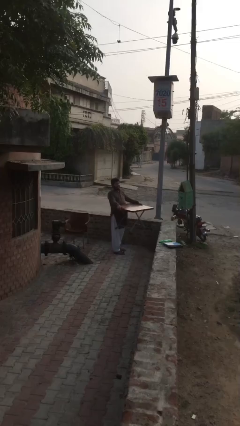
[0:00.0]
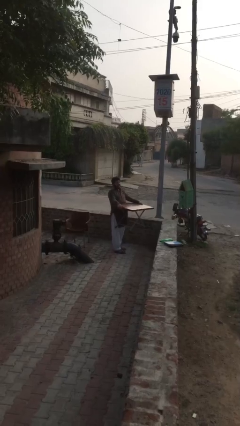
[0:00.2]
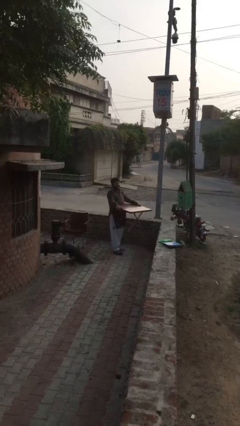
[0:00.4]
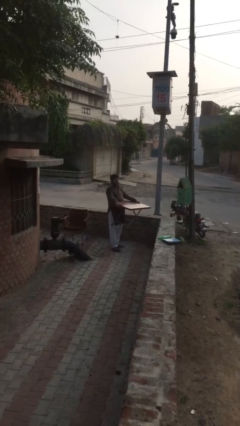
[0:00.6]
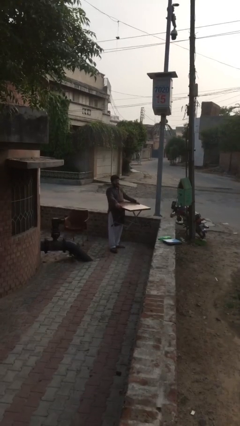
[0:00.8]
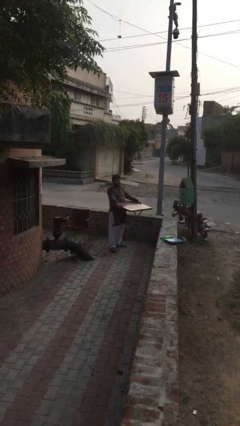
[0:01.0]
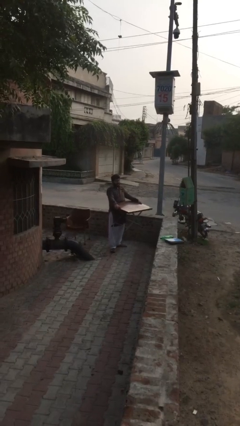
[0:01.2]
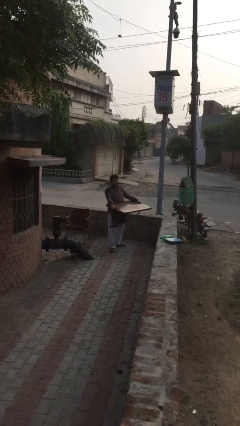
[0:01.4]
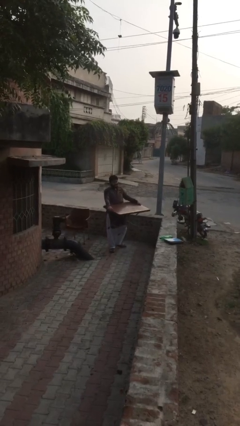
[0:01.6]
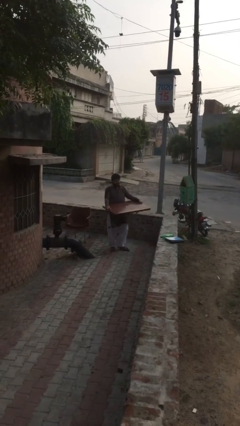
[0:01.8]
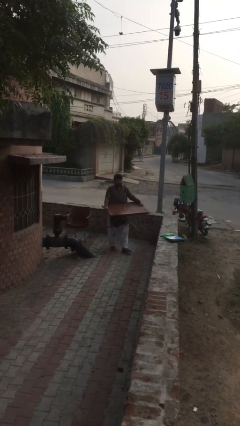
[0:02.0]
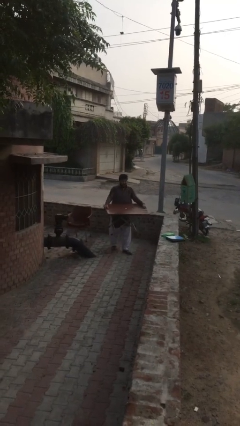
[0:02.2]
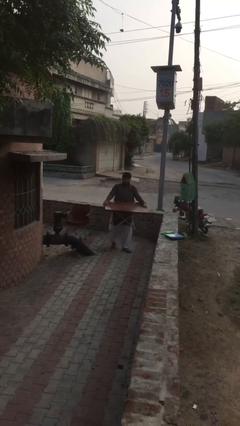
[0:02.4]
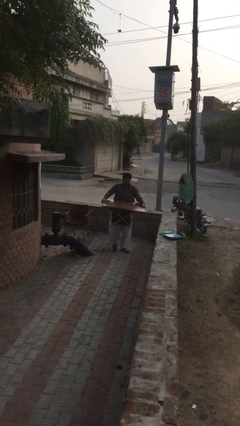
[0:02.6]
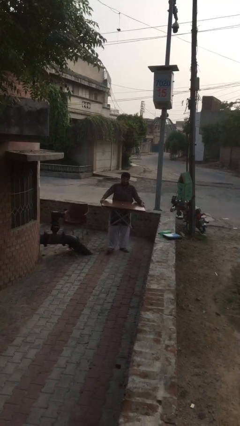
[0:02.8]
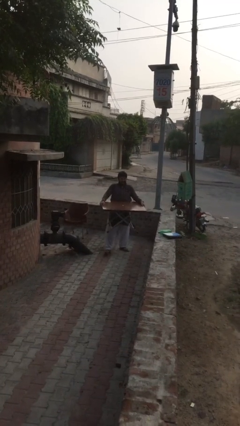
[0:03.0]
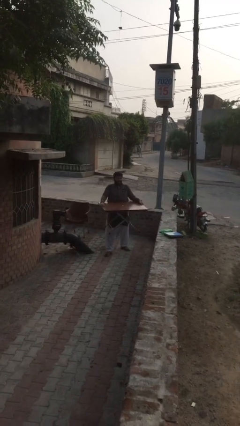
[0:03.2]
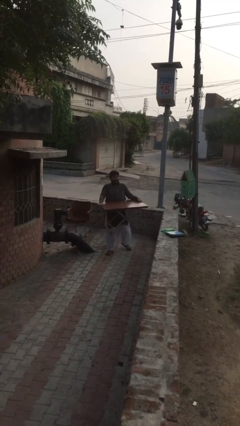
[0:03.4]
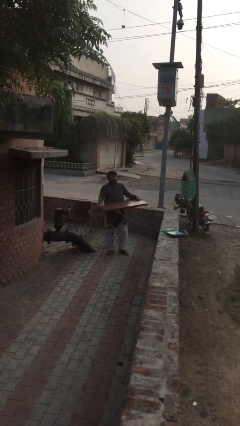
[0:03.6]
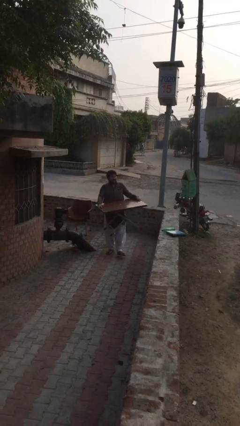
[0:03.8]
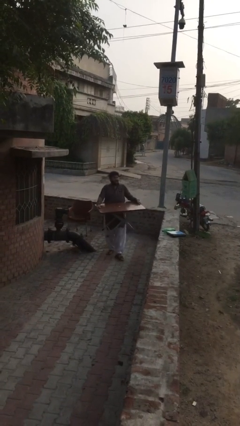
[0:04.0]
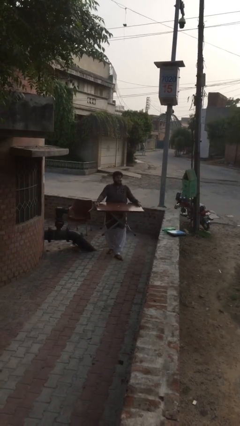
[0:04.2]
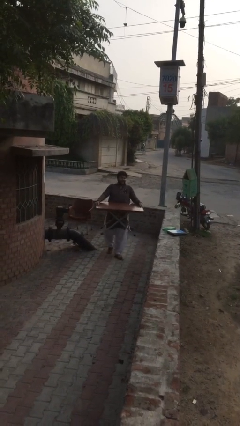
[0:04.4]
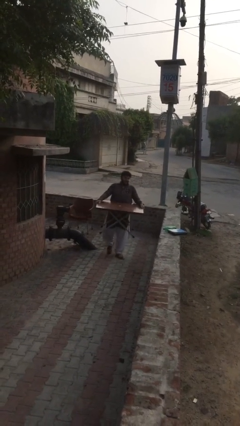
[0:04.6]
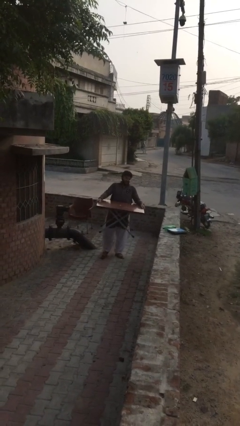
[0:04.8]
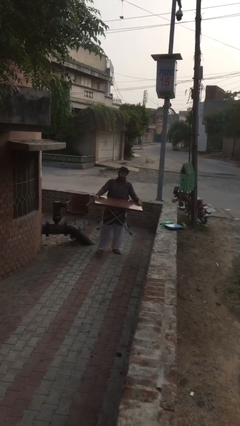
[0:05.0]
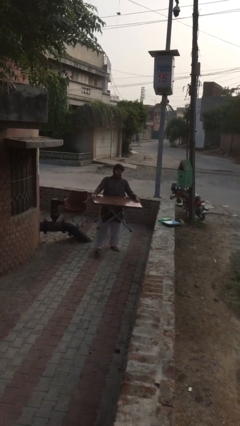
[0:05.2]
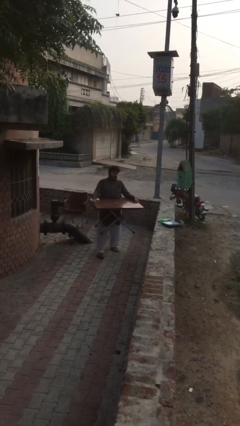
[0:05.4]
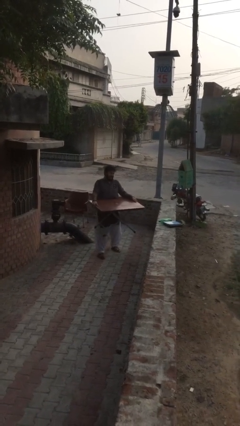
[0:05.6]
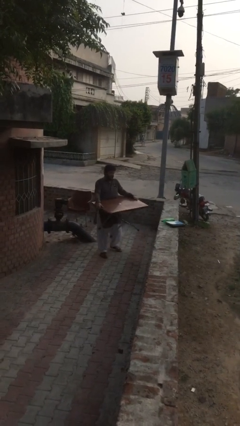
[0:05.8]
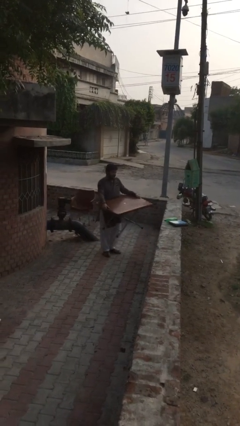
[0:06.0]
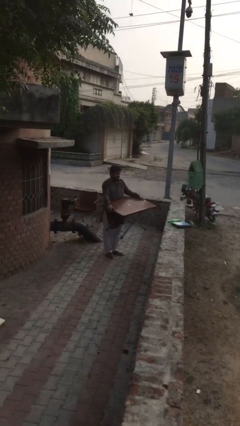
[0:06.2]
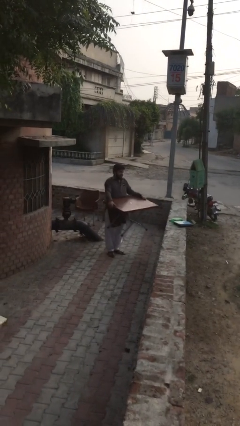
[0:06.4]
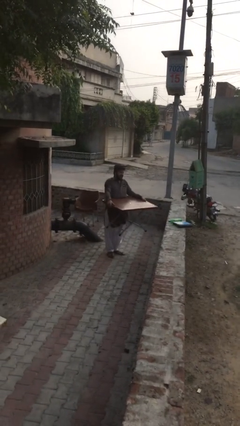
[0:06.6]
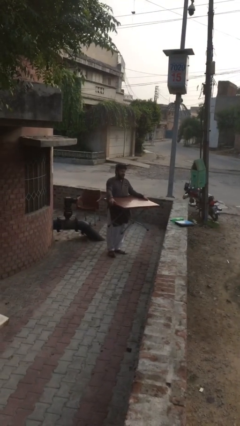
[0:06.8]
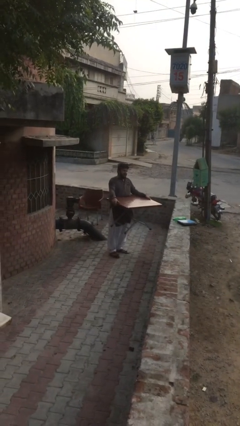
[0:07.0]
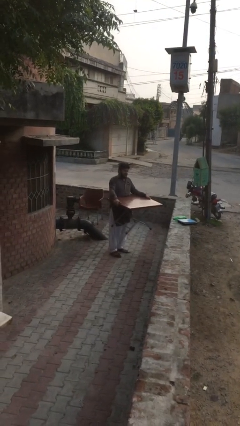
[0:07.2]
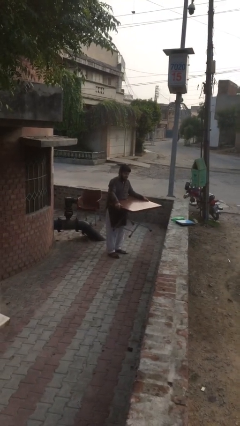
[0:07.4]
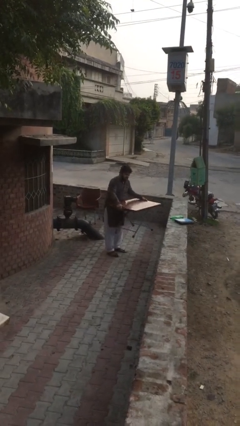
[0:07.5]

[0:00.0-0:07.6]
person carries heavy object

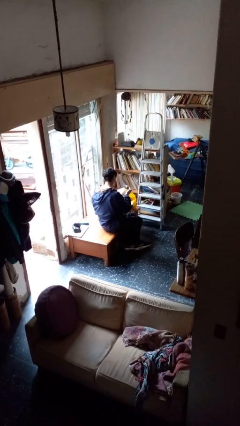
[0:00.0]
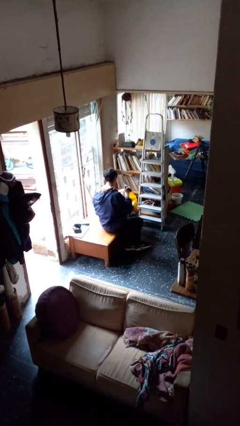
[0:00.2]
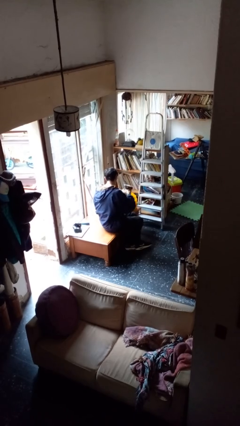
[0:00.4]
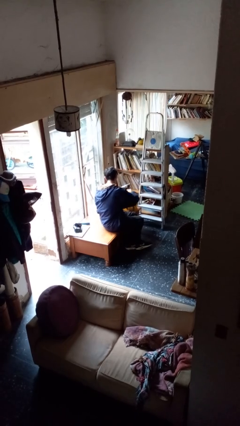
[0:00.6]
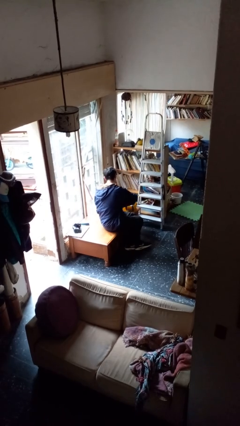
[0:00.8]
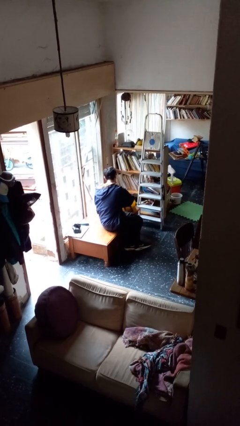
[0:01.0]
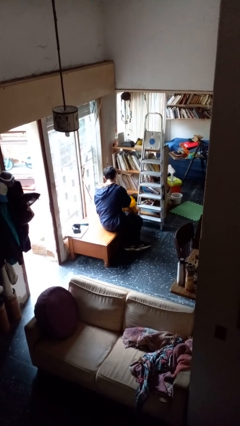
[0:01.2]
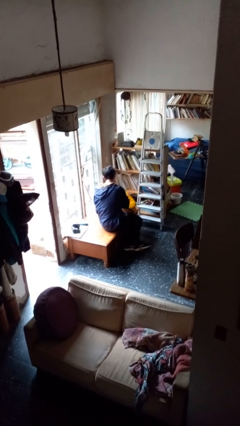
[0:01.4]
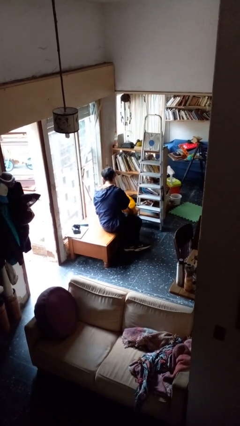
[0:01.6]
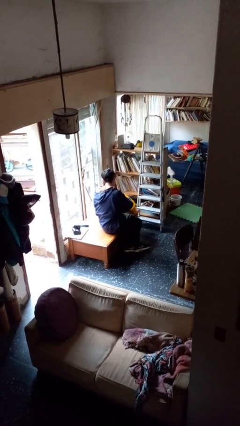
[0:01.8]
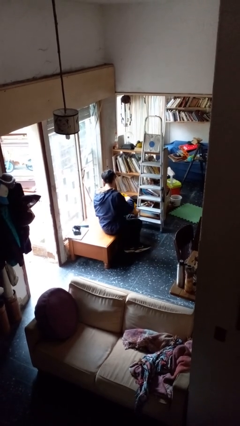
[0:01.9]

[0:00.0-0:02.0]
person puts object into bag

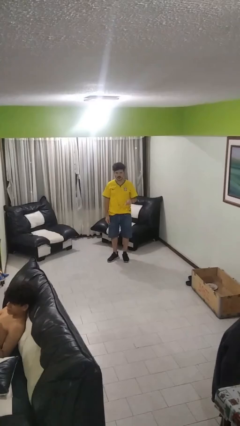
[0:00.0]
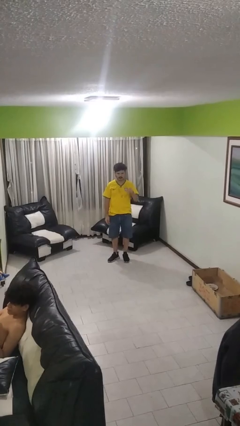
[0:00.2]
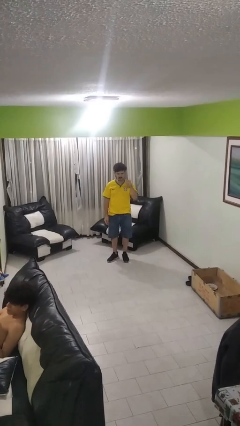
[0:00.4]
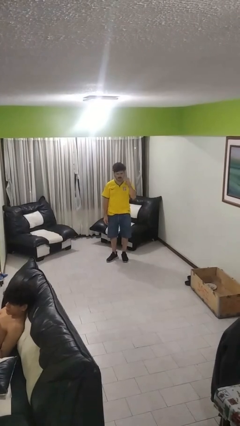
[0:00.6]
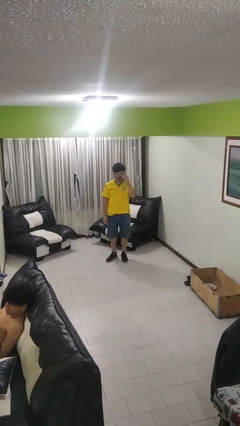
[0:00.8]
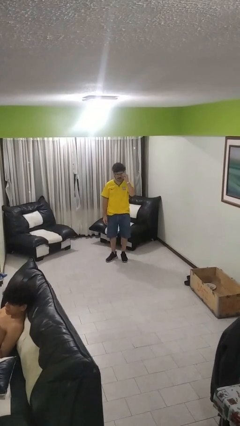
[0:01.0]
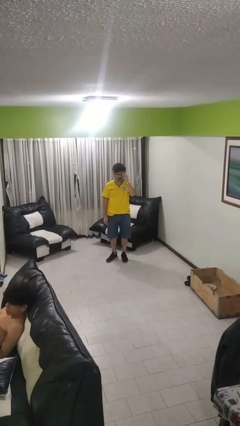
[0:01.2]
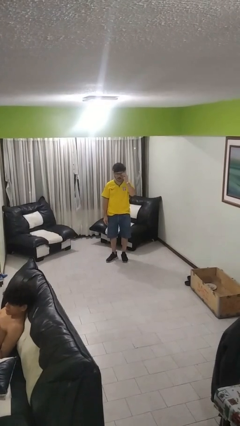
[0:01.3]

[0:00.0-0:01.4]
person puts on glasses

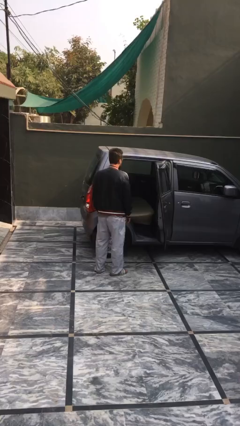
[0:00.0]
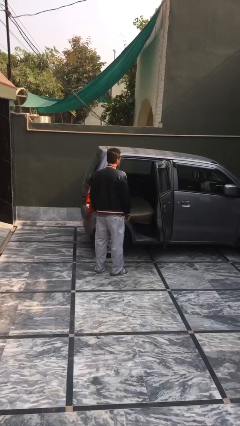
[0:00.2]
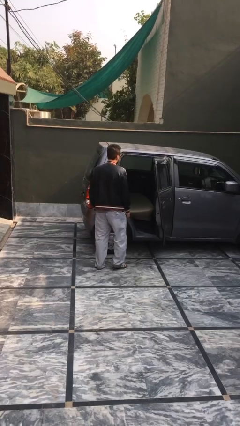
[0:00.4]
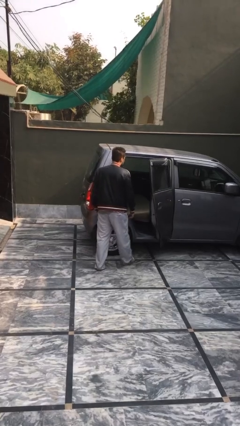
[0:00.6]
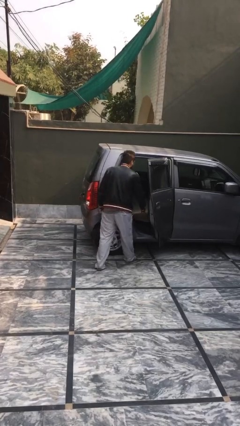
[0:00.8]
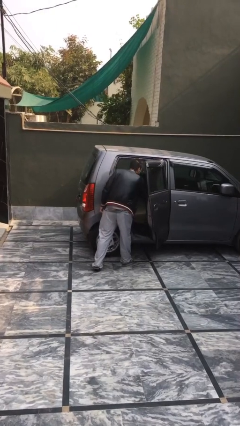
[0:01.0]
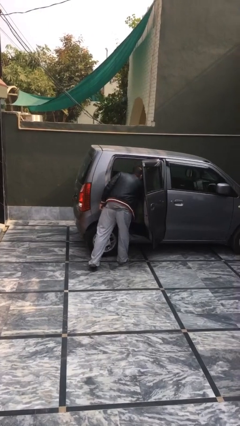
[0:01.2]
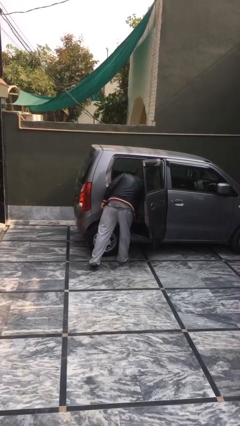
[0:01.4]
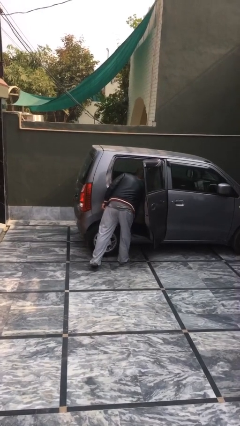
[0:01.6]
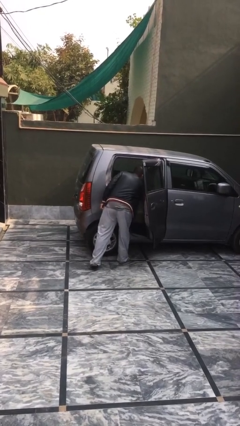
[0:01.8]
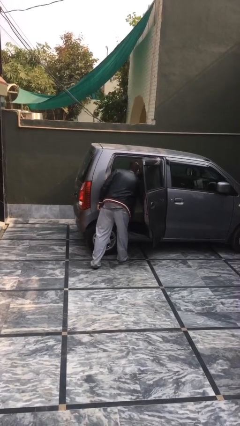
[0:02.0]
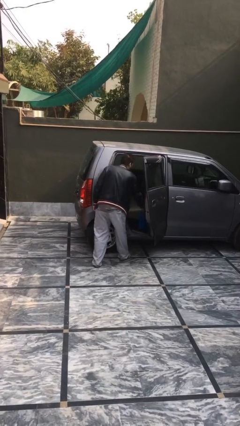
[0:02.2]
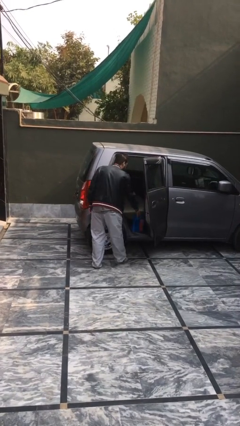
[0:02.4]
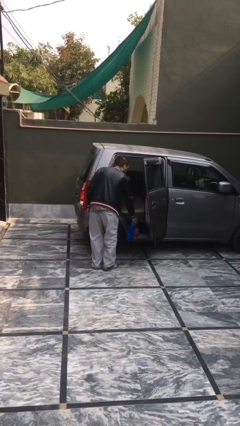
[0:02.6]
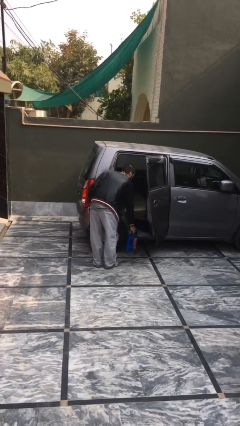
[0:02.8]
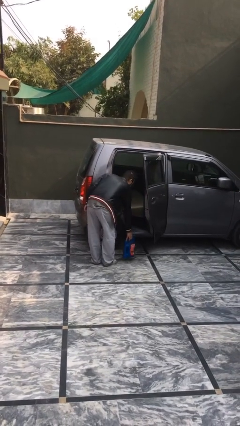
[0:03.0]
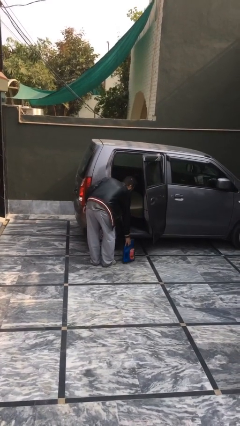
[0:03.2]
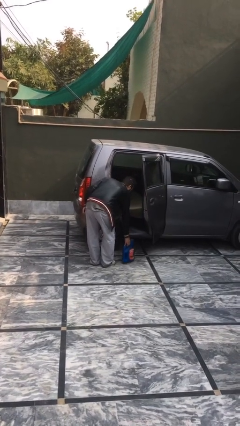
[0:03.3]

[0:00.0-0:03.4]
person unloads car

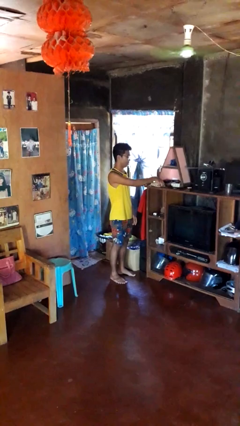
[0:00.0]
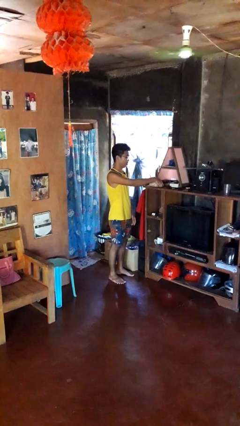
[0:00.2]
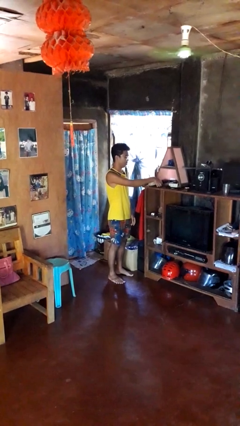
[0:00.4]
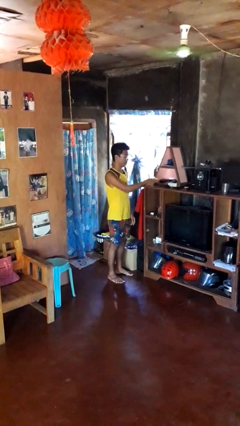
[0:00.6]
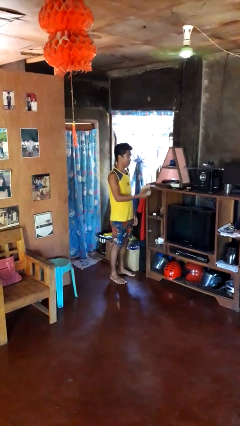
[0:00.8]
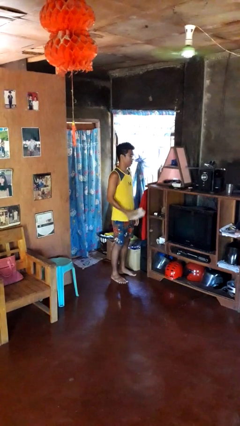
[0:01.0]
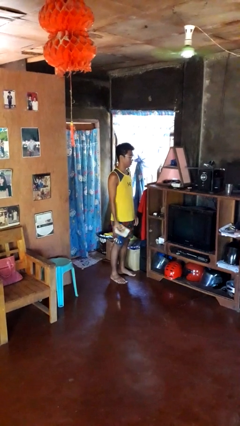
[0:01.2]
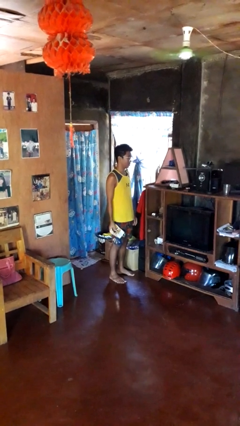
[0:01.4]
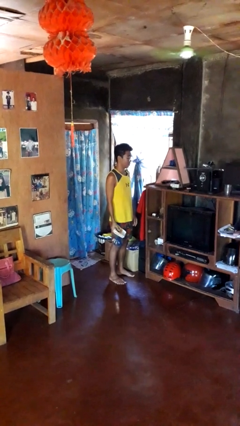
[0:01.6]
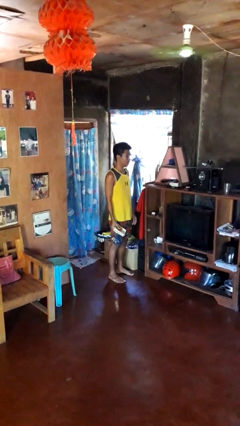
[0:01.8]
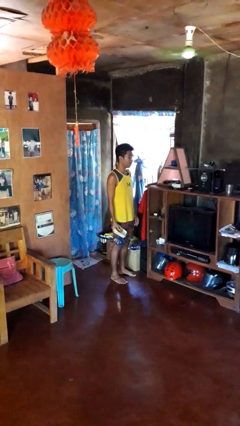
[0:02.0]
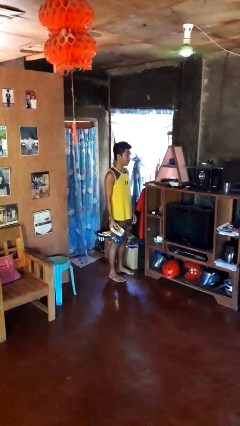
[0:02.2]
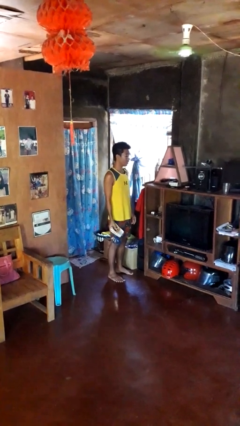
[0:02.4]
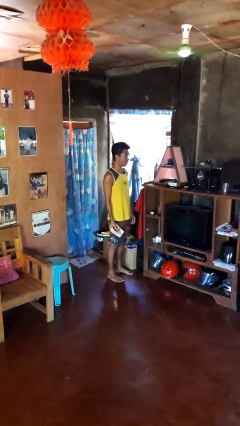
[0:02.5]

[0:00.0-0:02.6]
person picks up object from shelf

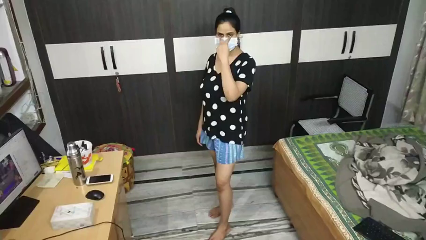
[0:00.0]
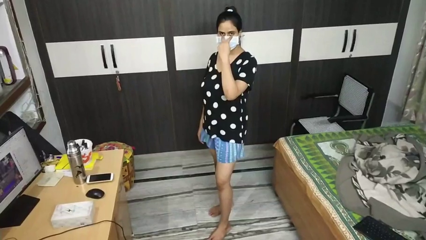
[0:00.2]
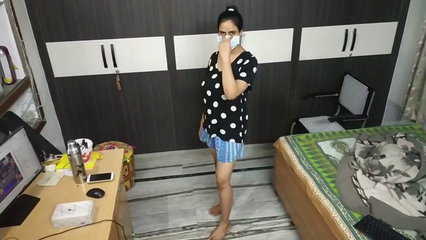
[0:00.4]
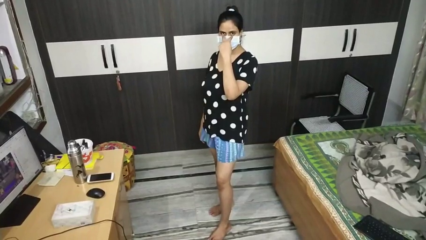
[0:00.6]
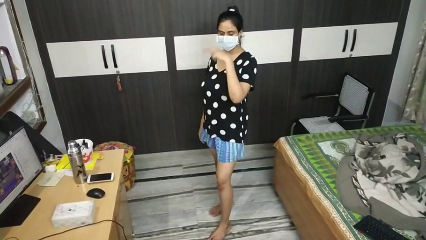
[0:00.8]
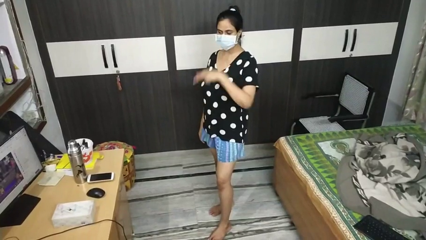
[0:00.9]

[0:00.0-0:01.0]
person gestures watch closely
